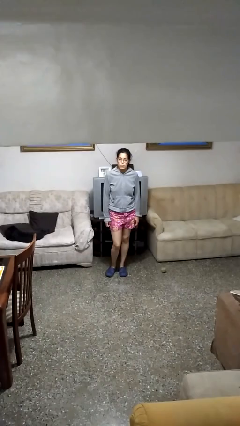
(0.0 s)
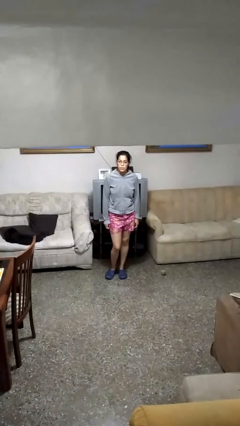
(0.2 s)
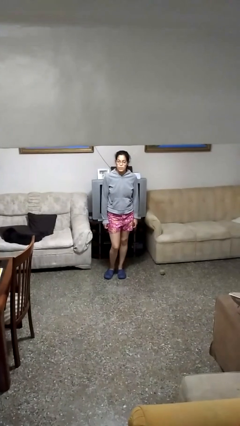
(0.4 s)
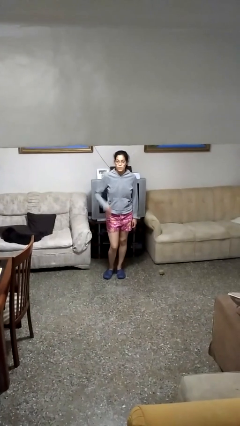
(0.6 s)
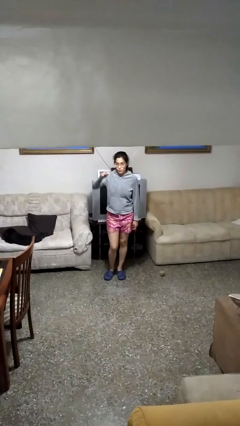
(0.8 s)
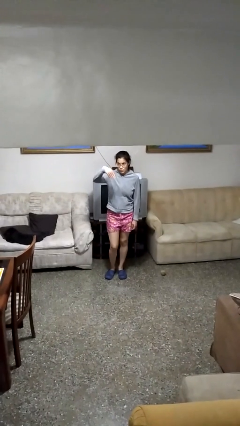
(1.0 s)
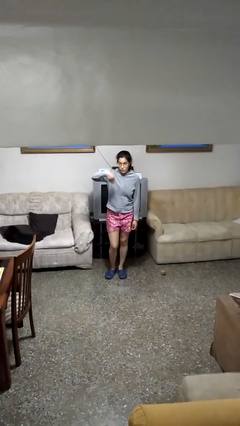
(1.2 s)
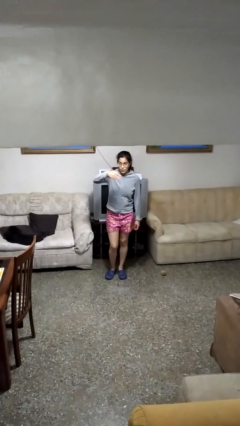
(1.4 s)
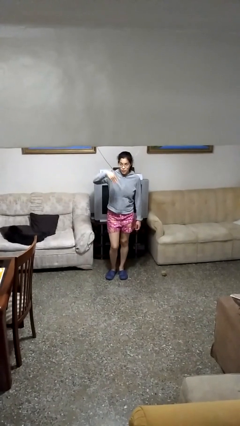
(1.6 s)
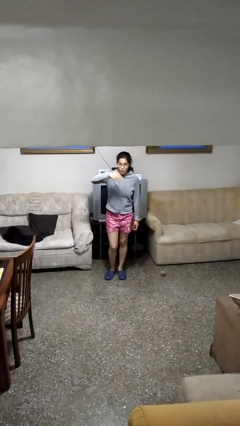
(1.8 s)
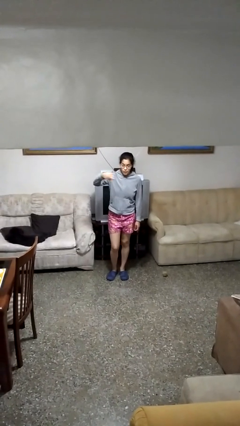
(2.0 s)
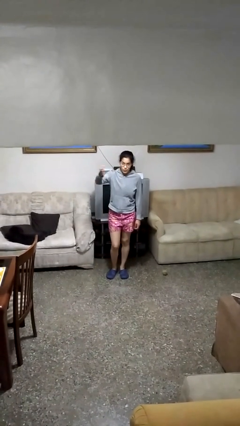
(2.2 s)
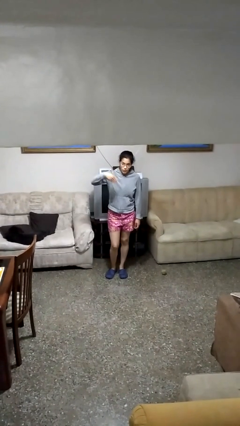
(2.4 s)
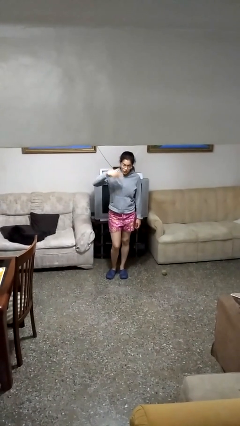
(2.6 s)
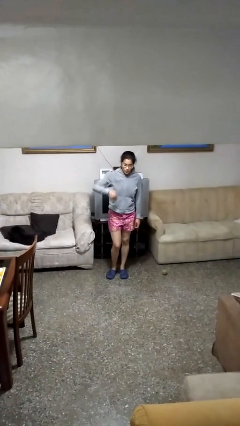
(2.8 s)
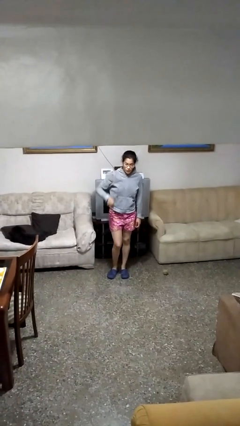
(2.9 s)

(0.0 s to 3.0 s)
person gestures come here

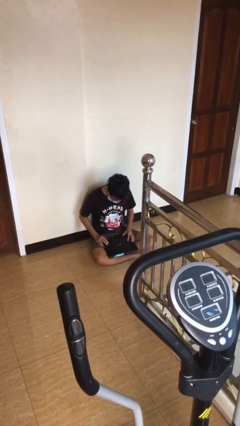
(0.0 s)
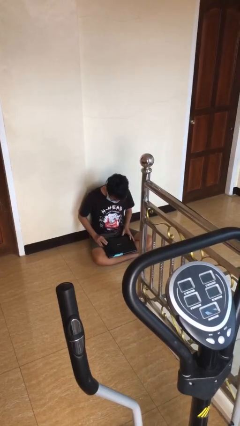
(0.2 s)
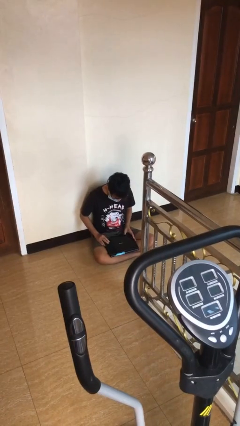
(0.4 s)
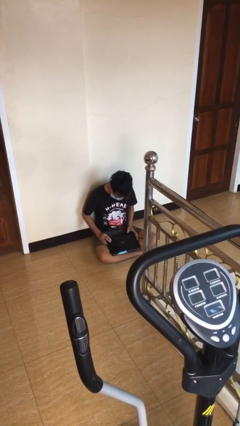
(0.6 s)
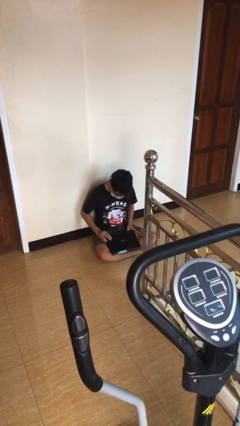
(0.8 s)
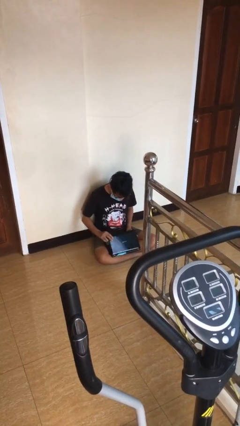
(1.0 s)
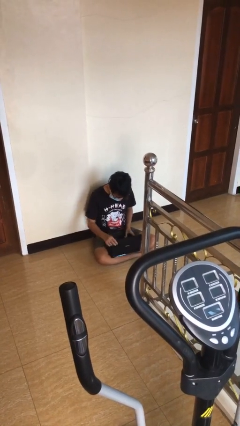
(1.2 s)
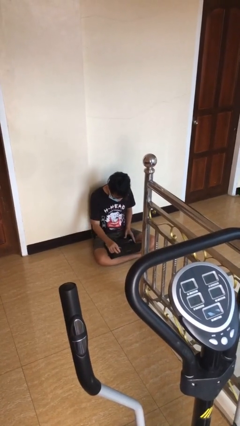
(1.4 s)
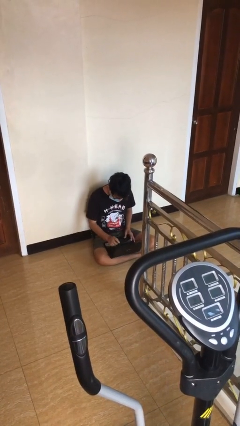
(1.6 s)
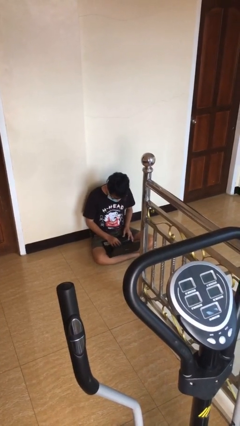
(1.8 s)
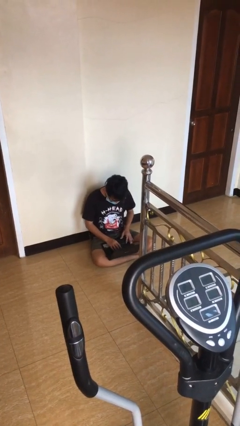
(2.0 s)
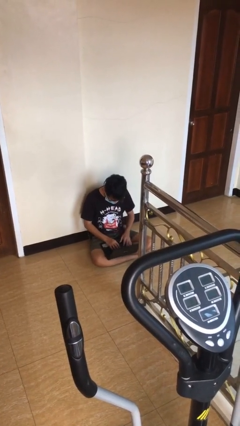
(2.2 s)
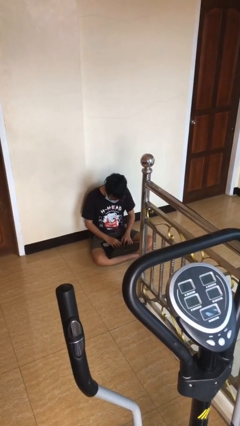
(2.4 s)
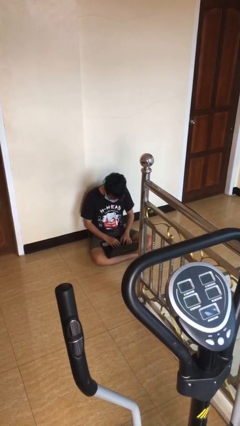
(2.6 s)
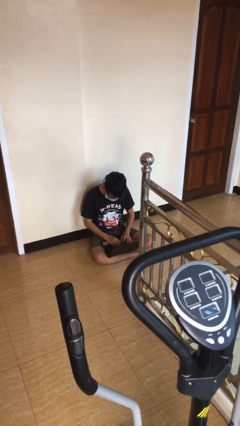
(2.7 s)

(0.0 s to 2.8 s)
person interacts with laptop

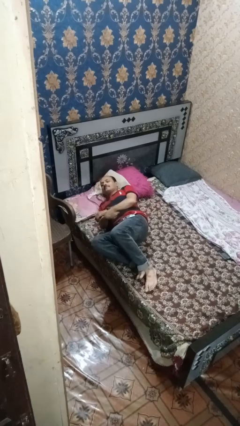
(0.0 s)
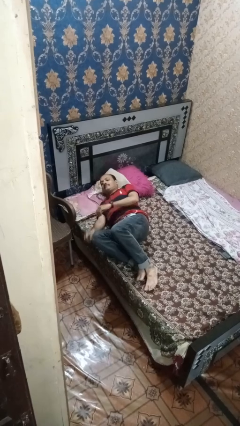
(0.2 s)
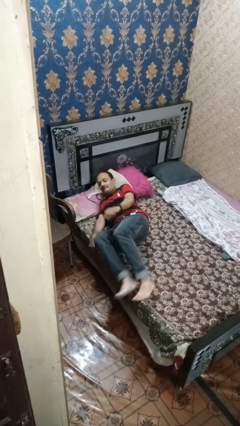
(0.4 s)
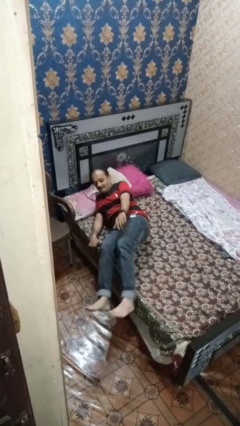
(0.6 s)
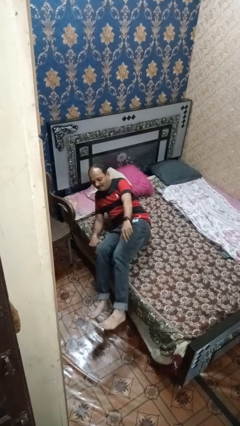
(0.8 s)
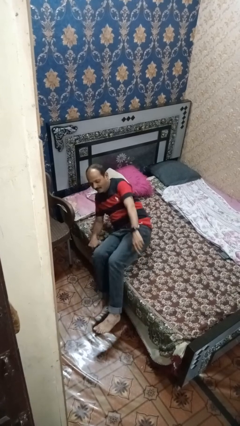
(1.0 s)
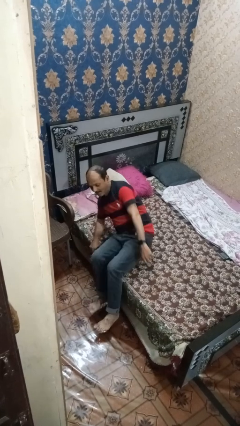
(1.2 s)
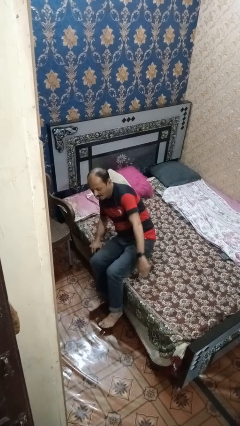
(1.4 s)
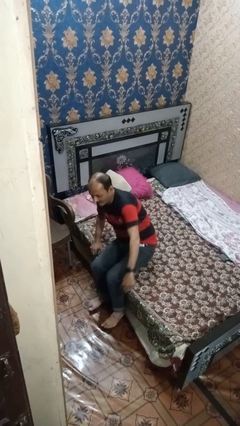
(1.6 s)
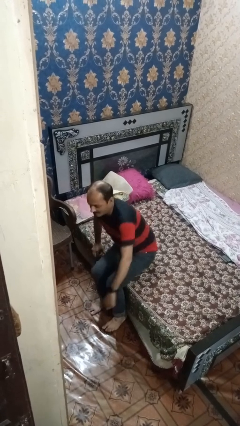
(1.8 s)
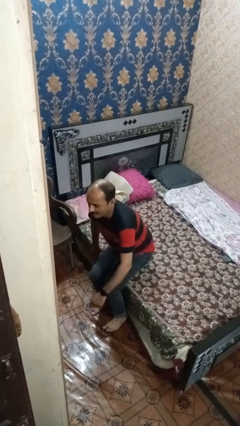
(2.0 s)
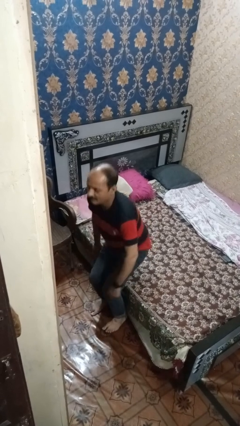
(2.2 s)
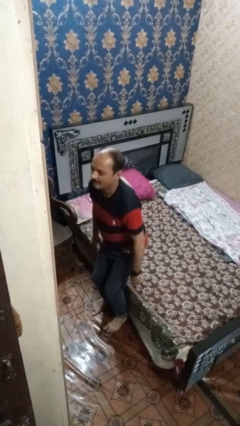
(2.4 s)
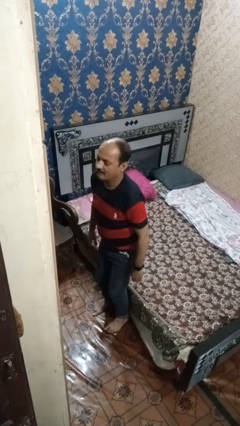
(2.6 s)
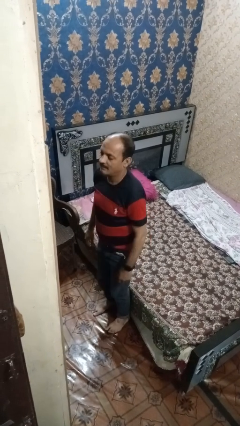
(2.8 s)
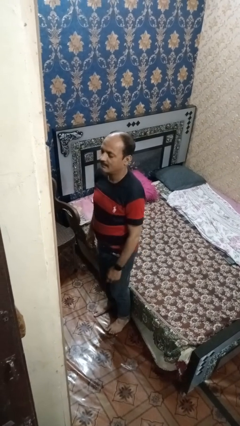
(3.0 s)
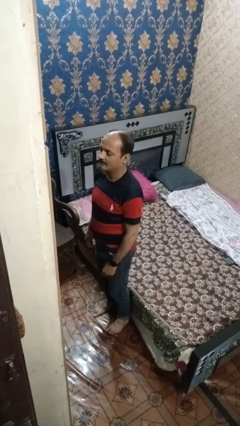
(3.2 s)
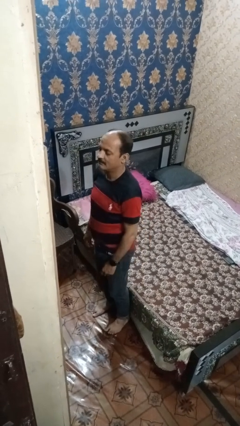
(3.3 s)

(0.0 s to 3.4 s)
person stands up

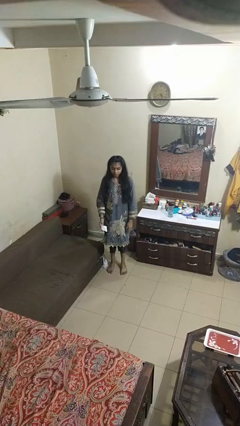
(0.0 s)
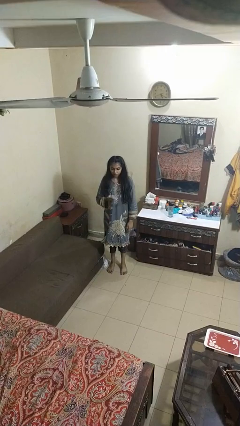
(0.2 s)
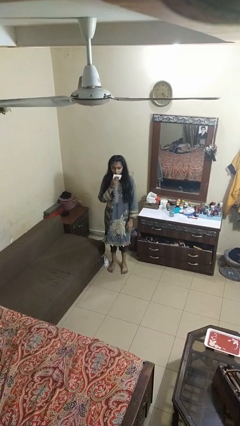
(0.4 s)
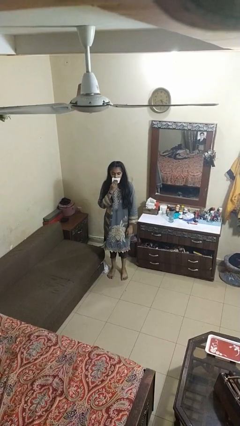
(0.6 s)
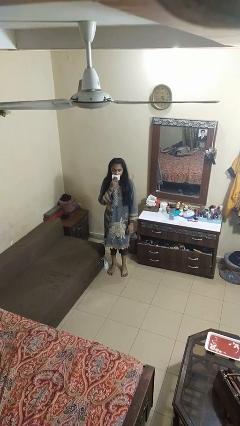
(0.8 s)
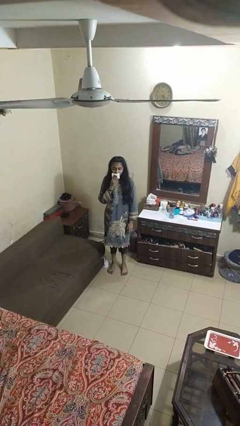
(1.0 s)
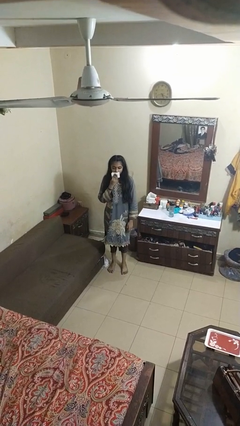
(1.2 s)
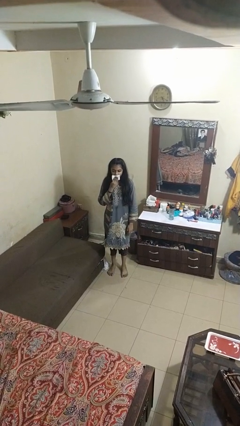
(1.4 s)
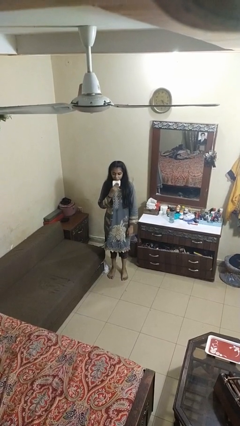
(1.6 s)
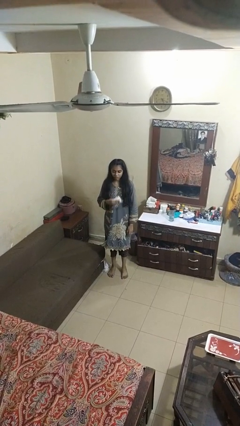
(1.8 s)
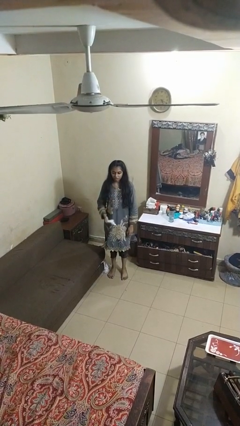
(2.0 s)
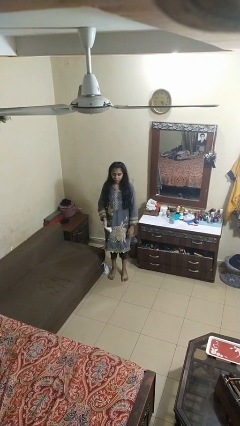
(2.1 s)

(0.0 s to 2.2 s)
person wipes mouth with napkin

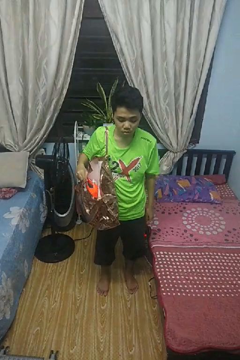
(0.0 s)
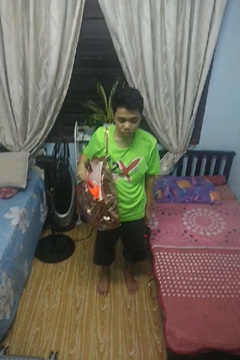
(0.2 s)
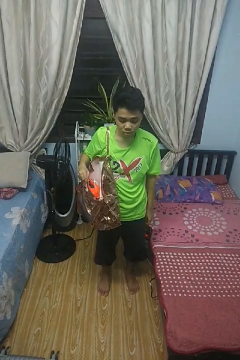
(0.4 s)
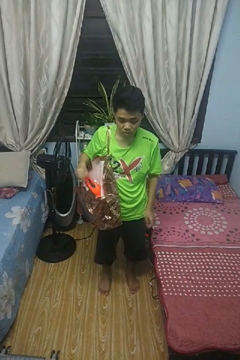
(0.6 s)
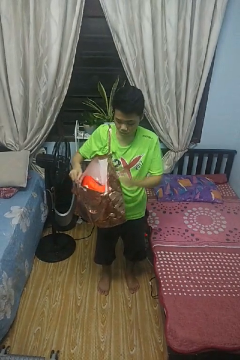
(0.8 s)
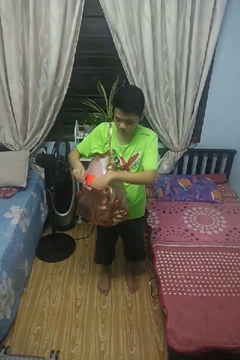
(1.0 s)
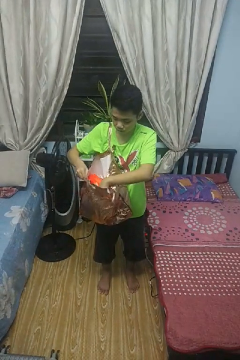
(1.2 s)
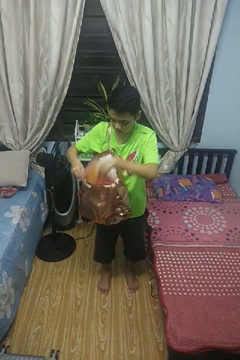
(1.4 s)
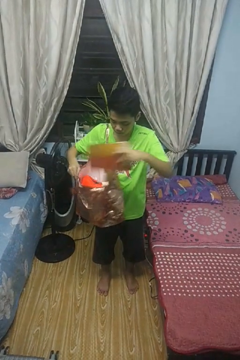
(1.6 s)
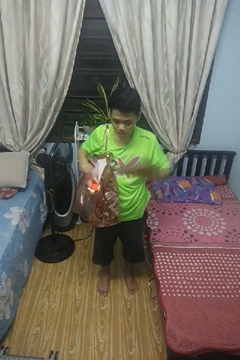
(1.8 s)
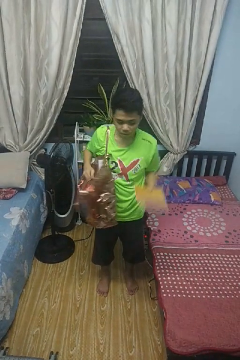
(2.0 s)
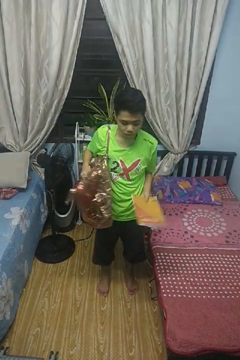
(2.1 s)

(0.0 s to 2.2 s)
person takes object from bag

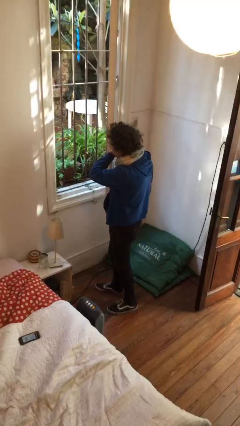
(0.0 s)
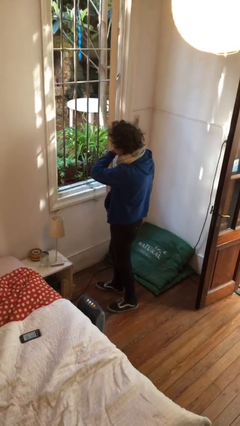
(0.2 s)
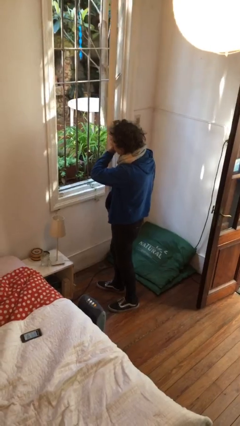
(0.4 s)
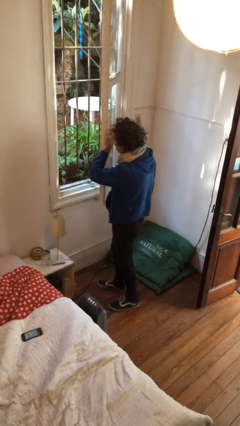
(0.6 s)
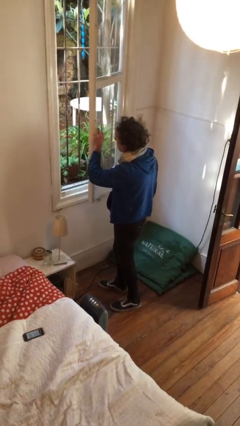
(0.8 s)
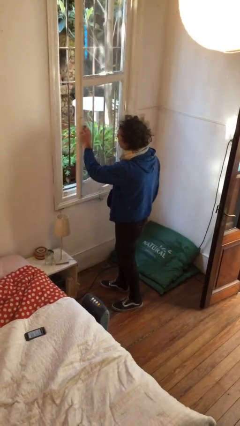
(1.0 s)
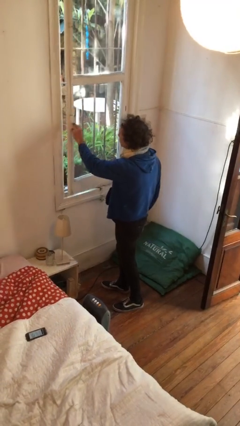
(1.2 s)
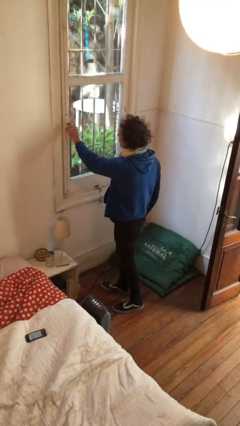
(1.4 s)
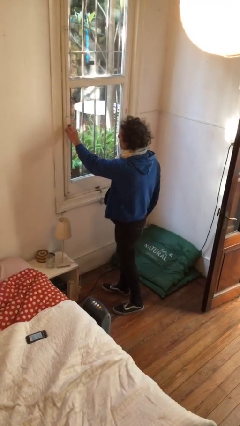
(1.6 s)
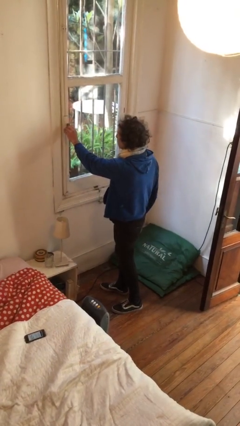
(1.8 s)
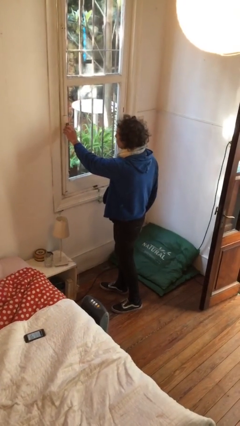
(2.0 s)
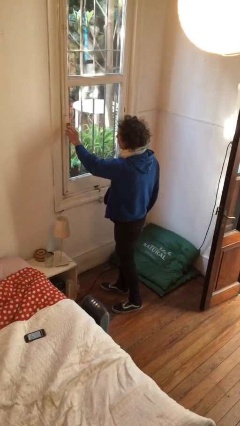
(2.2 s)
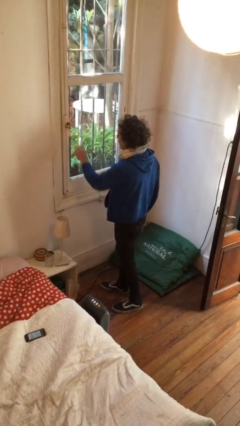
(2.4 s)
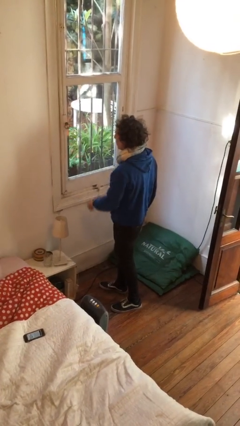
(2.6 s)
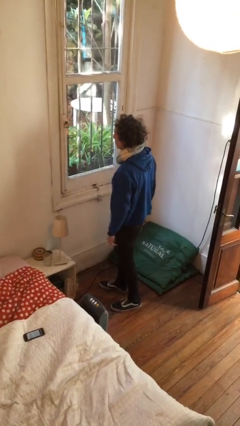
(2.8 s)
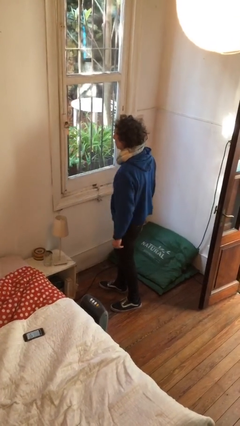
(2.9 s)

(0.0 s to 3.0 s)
person closes home window

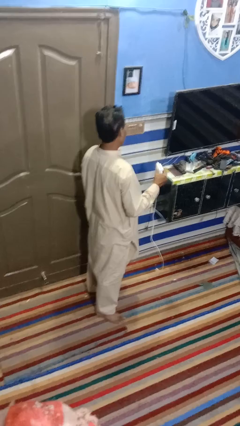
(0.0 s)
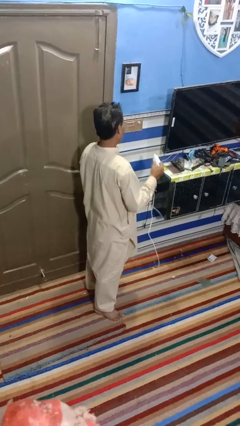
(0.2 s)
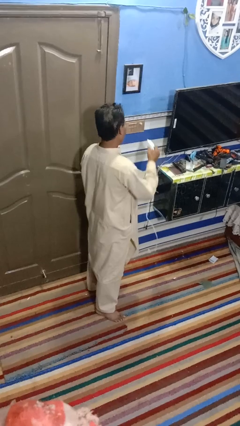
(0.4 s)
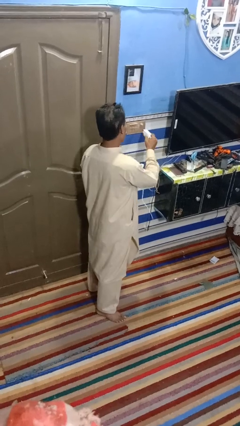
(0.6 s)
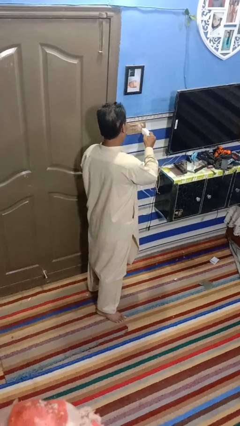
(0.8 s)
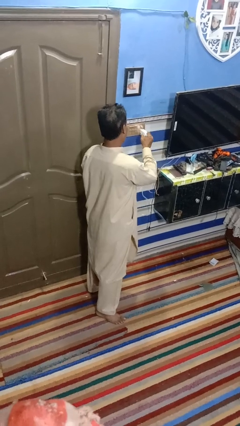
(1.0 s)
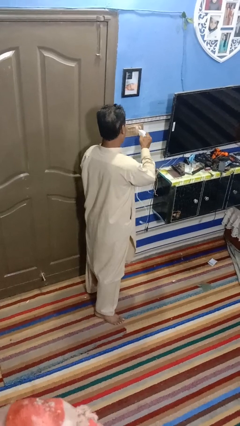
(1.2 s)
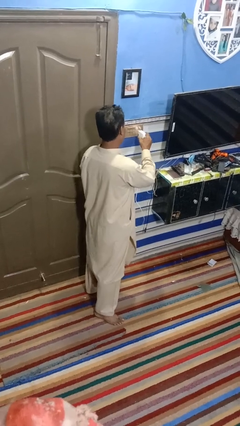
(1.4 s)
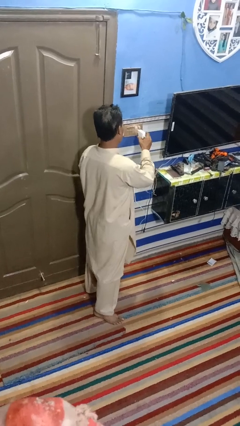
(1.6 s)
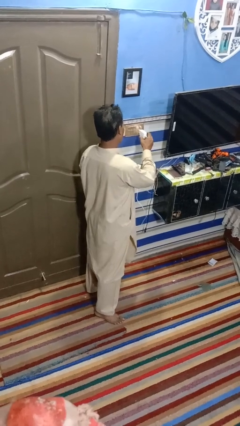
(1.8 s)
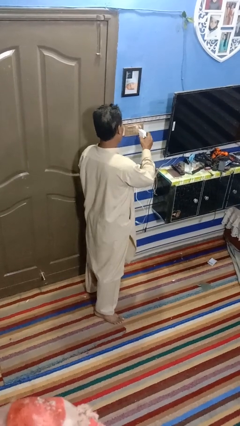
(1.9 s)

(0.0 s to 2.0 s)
person plugs into electrical socket
